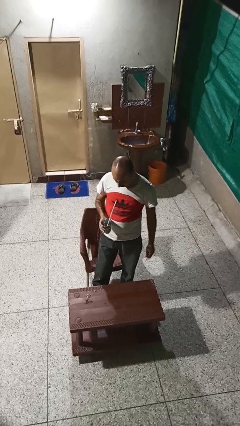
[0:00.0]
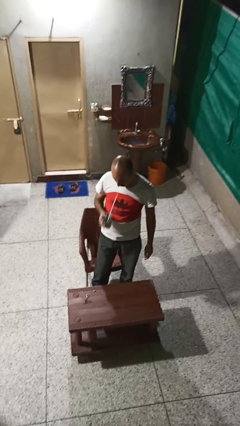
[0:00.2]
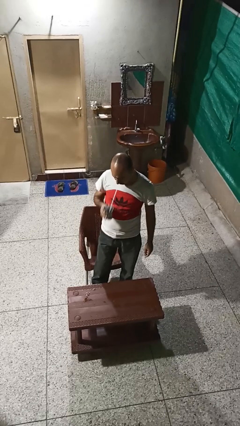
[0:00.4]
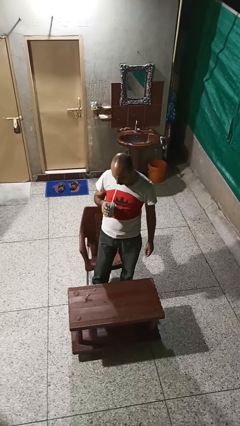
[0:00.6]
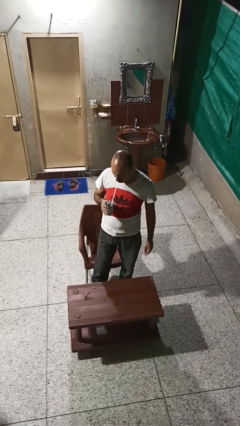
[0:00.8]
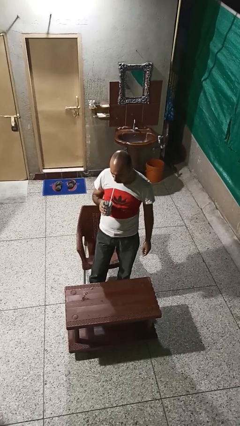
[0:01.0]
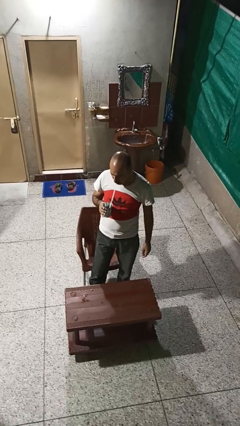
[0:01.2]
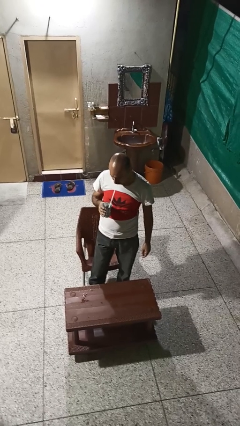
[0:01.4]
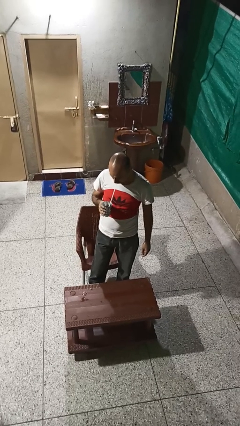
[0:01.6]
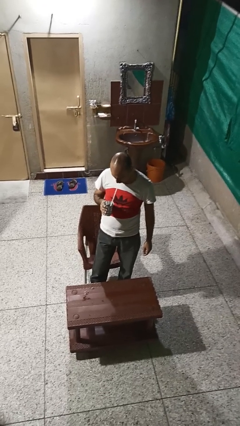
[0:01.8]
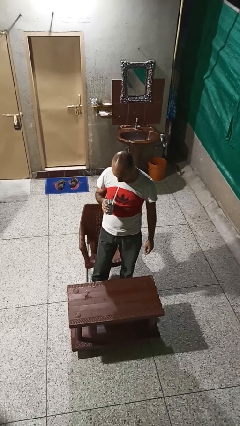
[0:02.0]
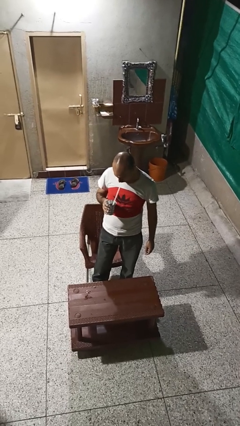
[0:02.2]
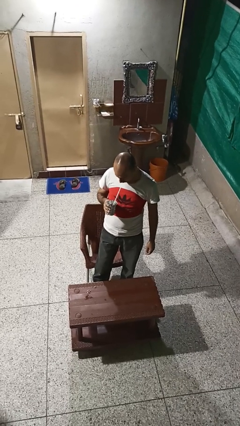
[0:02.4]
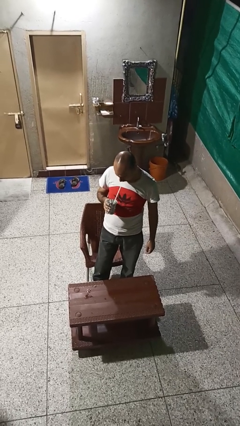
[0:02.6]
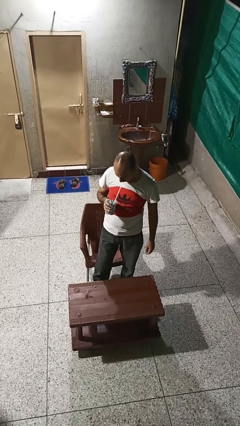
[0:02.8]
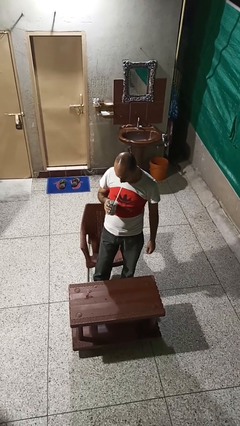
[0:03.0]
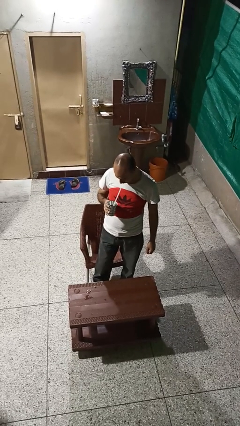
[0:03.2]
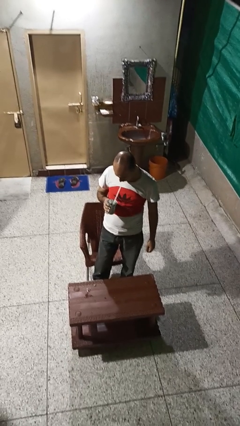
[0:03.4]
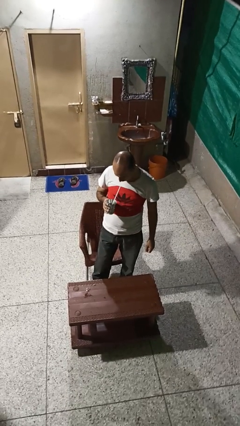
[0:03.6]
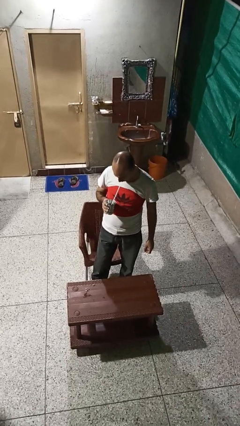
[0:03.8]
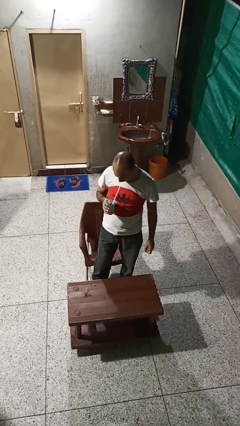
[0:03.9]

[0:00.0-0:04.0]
person drinks from straw

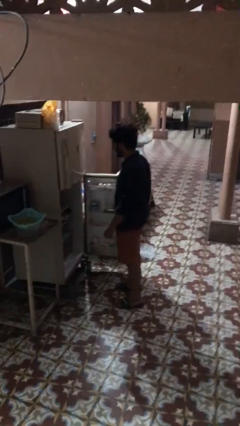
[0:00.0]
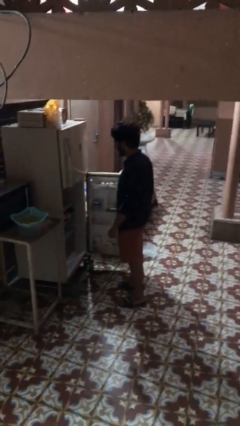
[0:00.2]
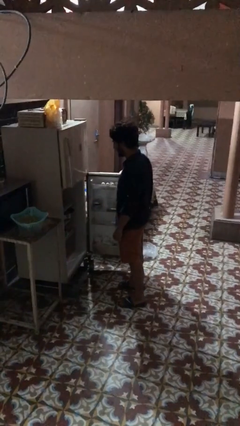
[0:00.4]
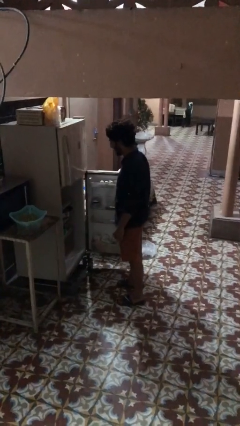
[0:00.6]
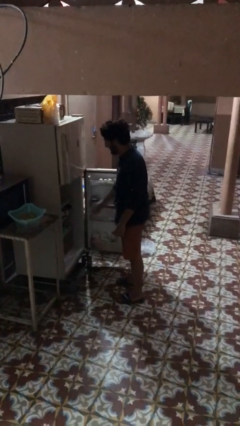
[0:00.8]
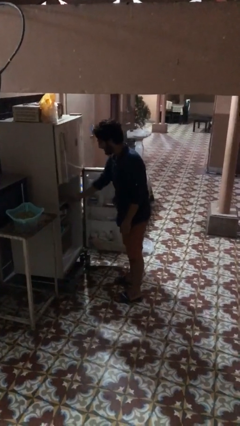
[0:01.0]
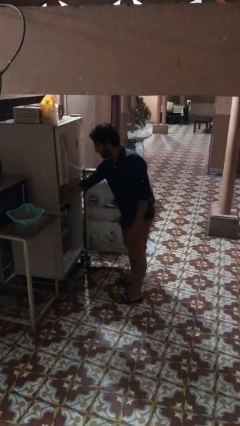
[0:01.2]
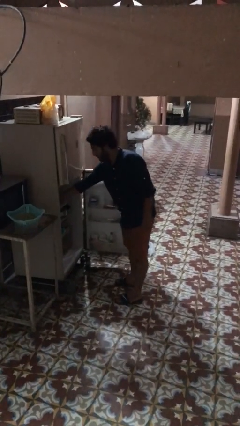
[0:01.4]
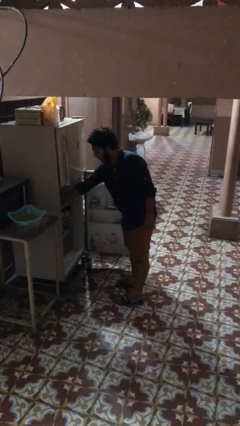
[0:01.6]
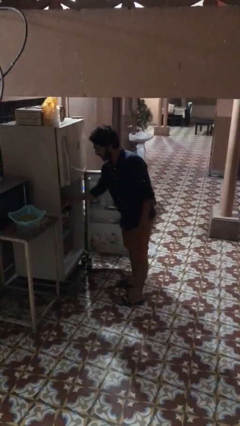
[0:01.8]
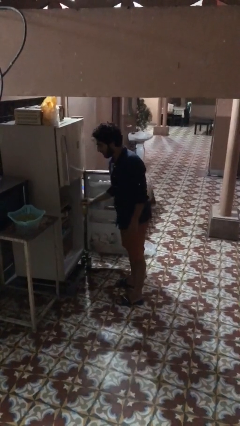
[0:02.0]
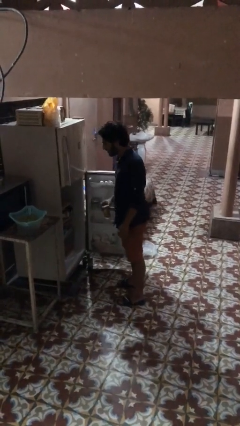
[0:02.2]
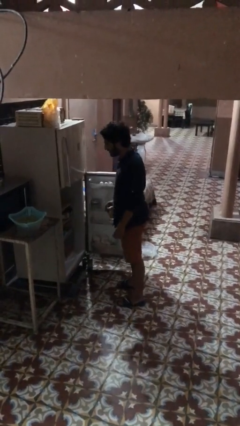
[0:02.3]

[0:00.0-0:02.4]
person takes object from refrigerator

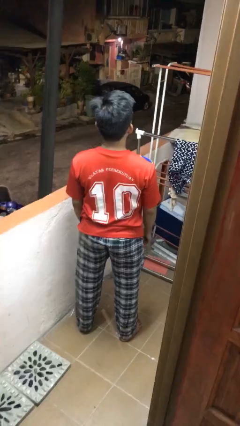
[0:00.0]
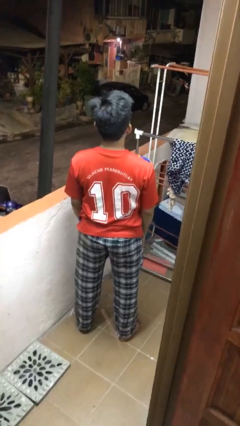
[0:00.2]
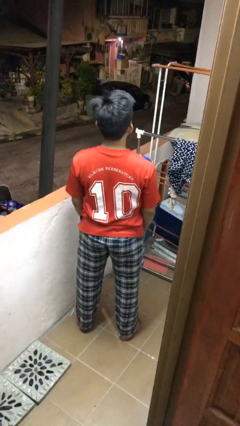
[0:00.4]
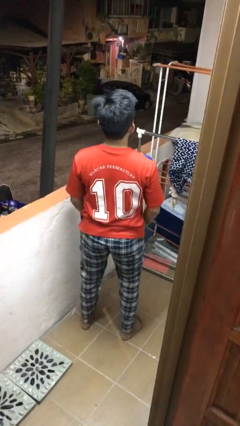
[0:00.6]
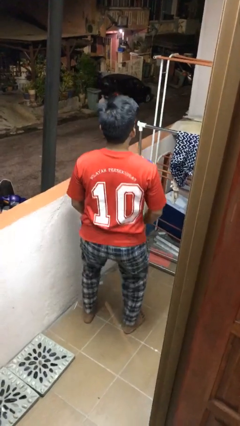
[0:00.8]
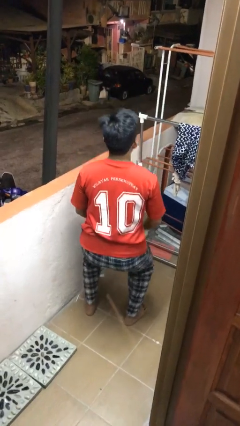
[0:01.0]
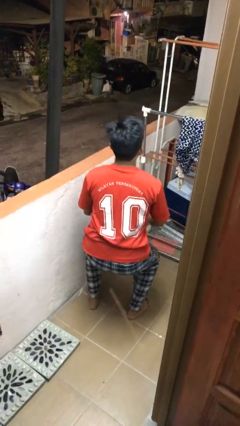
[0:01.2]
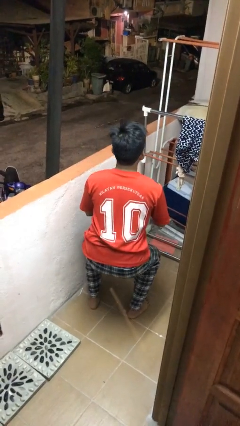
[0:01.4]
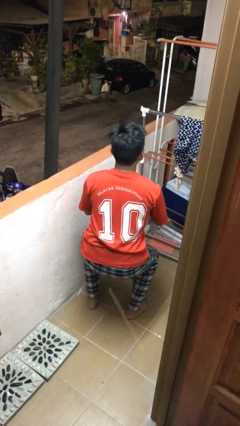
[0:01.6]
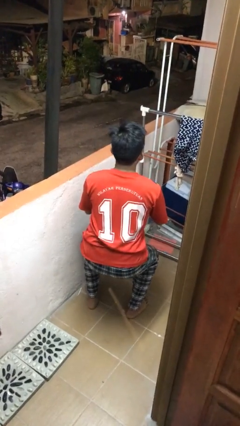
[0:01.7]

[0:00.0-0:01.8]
person squats

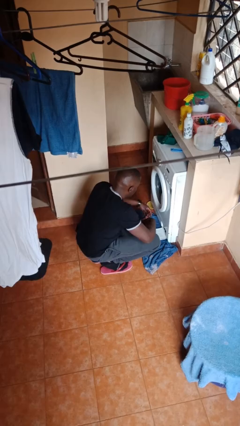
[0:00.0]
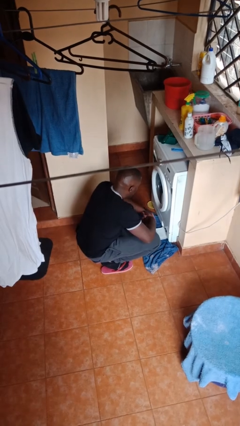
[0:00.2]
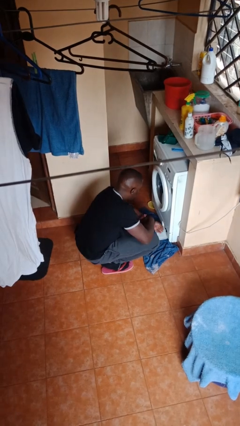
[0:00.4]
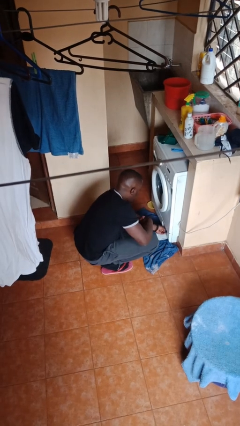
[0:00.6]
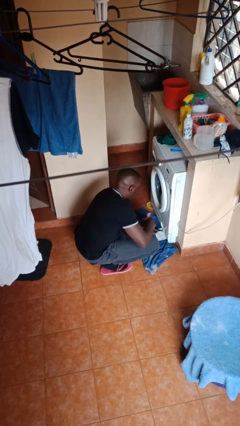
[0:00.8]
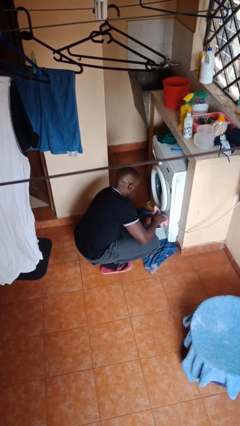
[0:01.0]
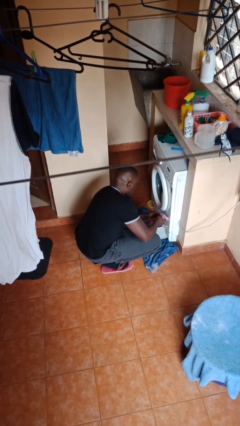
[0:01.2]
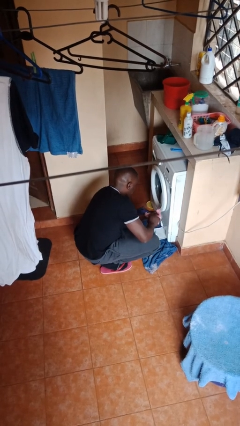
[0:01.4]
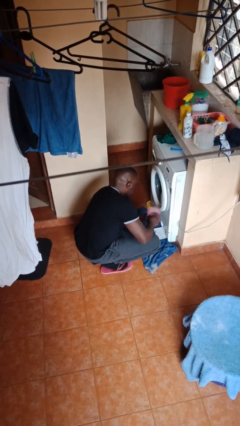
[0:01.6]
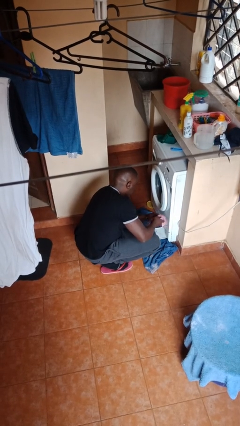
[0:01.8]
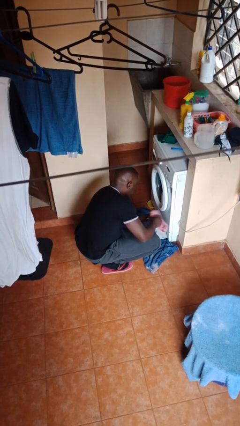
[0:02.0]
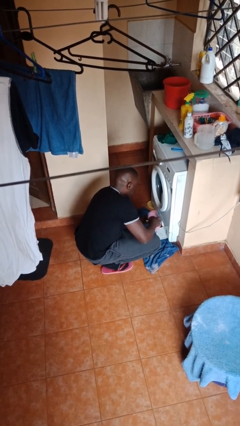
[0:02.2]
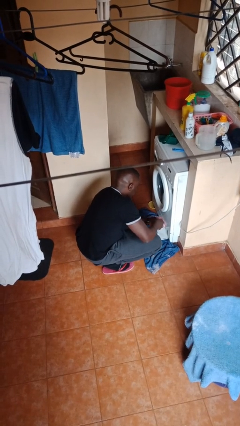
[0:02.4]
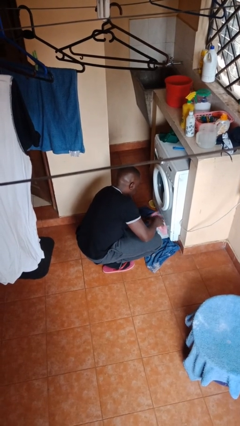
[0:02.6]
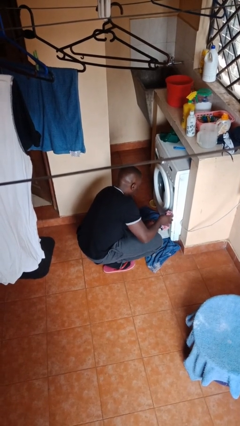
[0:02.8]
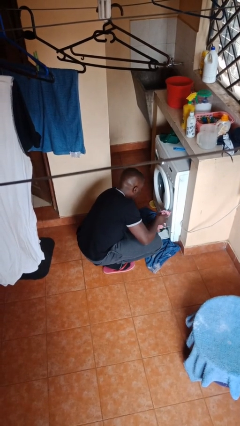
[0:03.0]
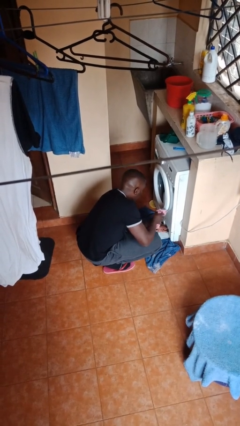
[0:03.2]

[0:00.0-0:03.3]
person cleans dryer lint trap

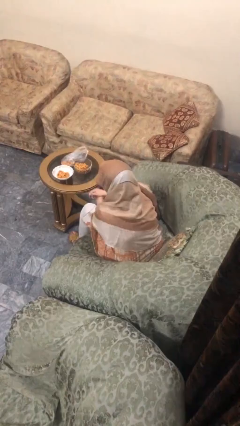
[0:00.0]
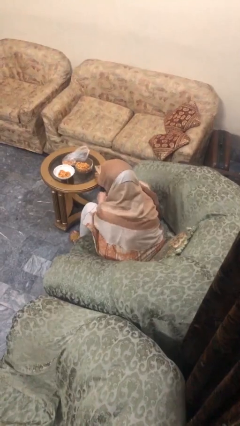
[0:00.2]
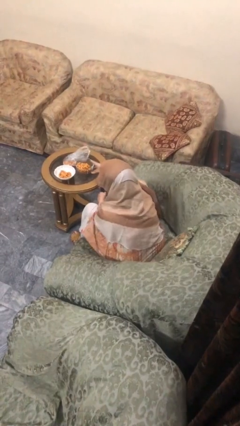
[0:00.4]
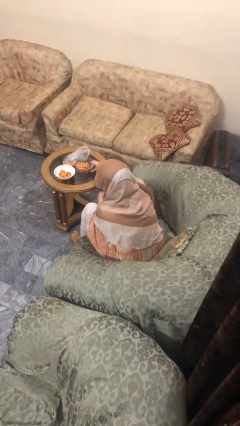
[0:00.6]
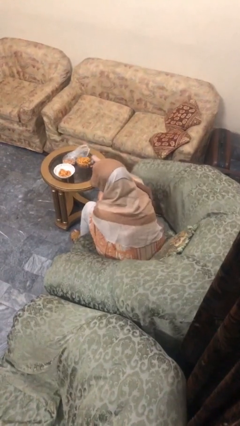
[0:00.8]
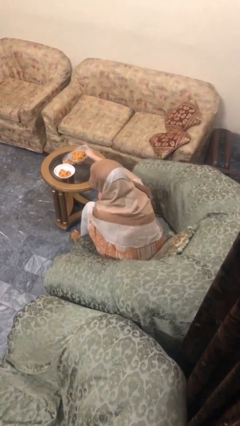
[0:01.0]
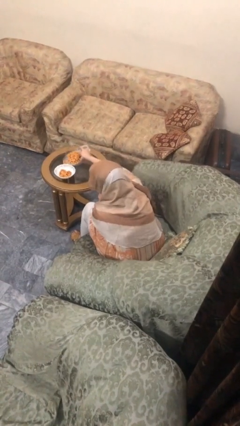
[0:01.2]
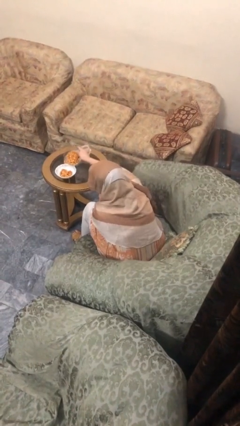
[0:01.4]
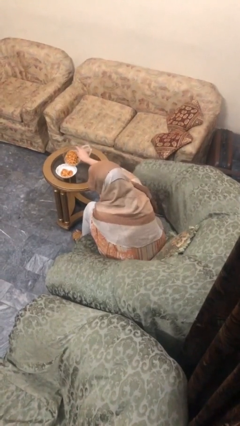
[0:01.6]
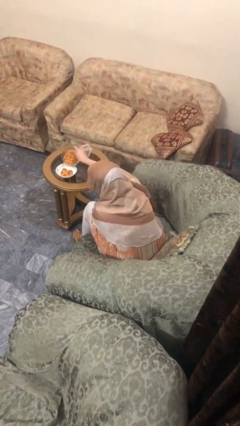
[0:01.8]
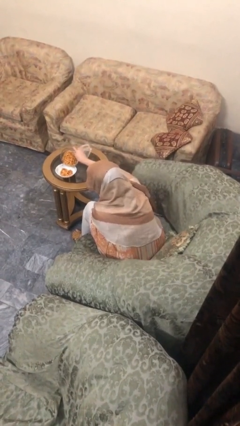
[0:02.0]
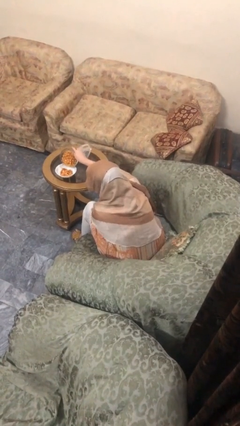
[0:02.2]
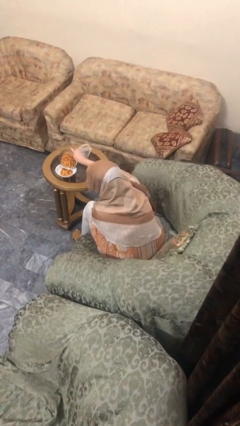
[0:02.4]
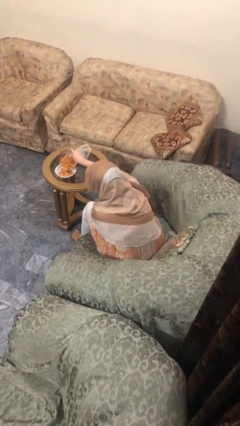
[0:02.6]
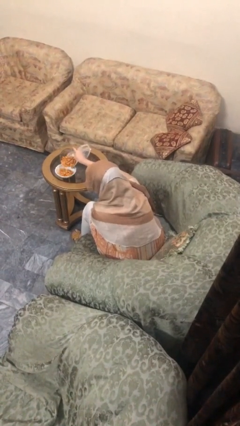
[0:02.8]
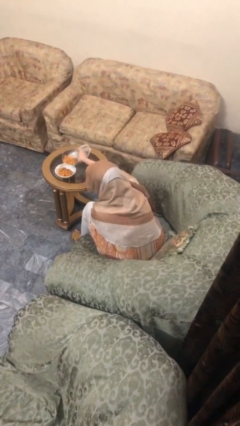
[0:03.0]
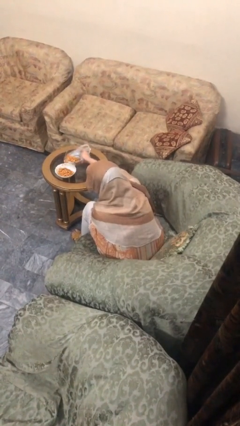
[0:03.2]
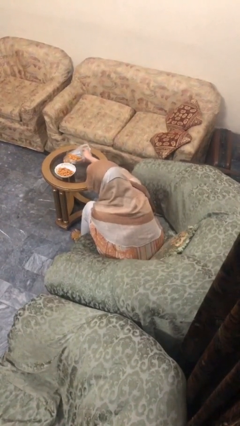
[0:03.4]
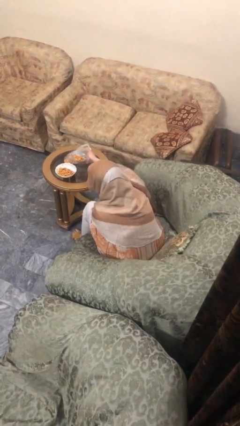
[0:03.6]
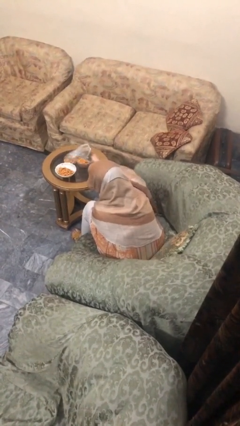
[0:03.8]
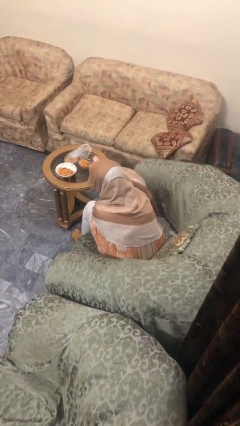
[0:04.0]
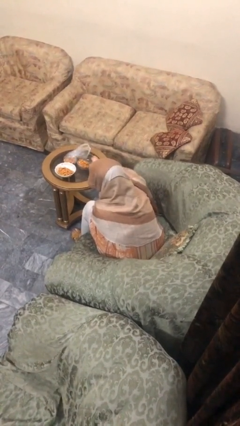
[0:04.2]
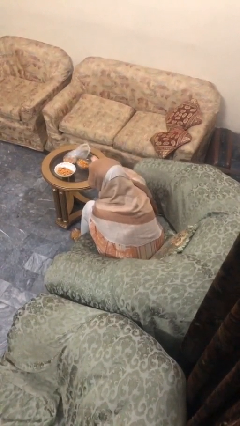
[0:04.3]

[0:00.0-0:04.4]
person pours into bowl

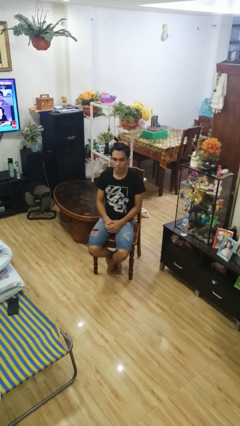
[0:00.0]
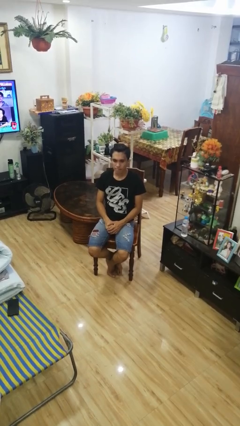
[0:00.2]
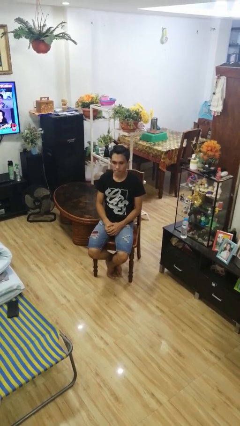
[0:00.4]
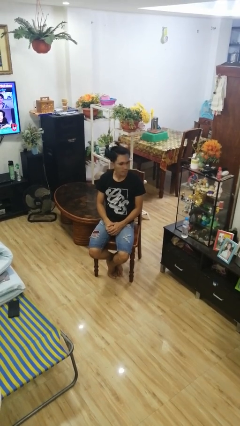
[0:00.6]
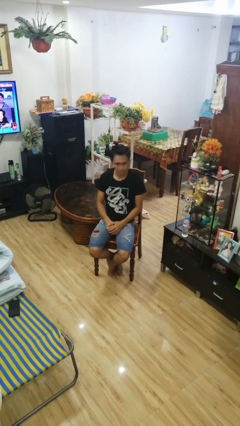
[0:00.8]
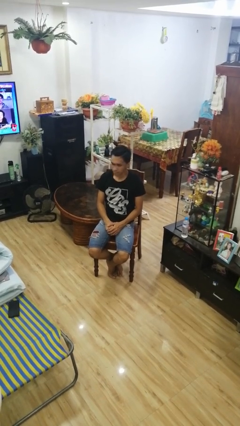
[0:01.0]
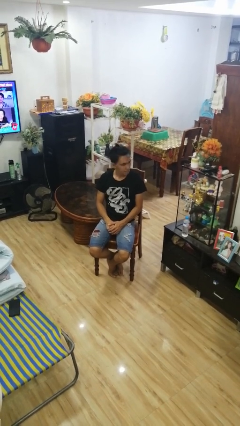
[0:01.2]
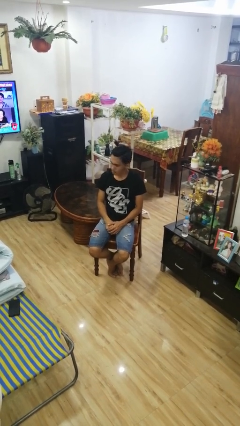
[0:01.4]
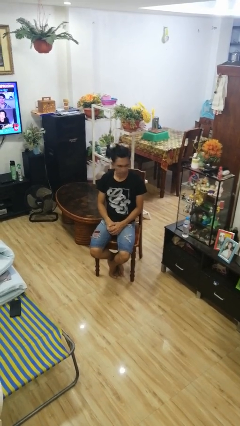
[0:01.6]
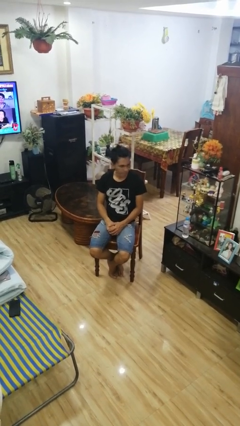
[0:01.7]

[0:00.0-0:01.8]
person shakes head
